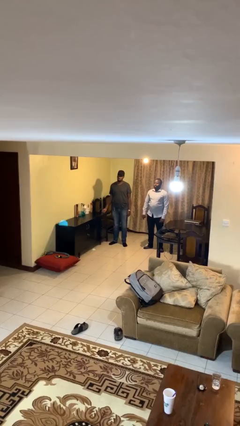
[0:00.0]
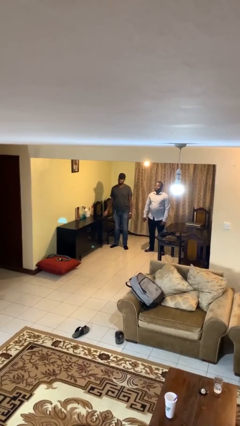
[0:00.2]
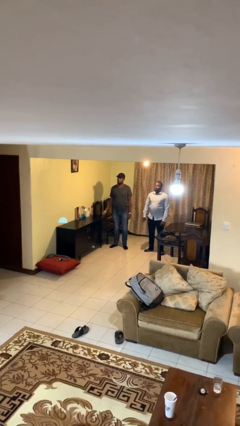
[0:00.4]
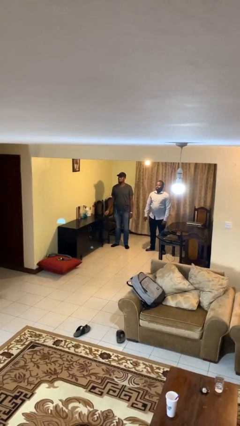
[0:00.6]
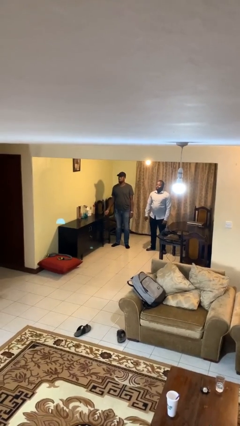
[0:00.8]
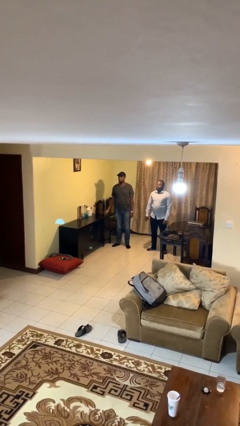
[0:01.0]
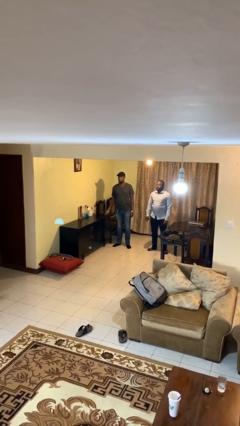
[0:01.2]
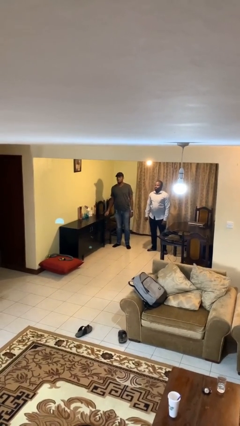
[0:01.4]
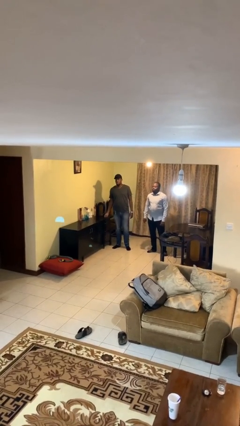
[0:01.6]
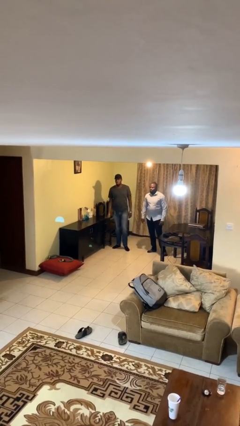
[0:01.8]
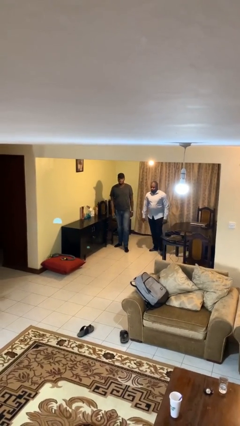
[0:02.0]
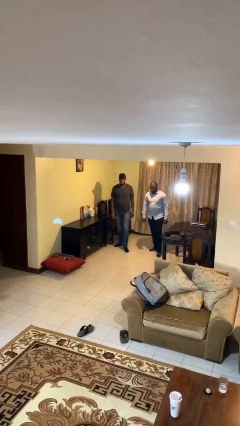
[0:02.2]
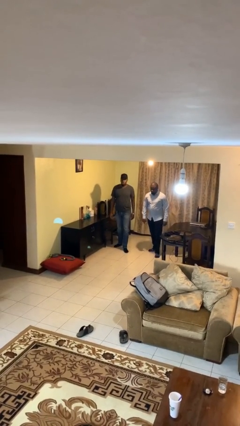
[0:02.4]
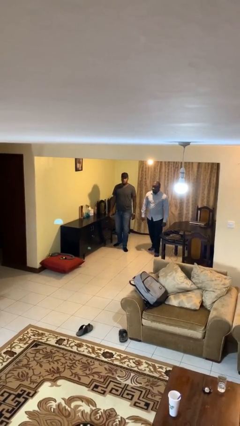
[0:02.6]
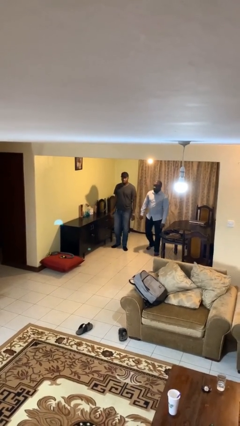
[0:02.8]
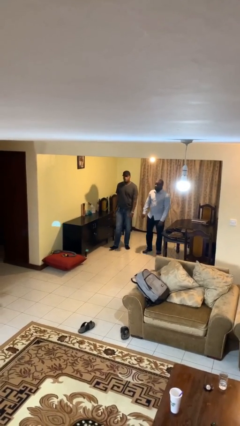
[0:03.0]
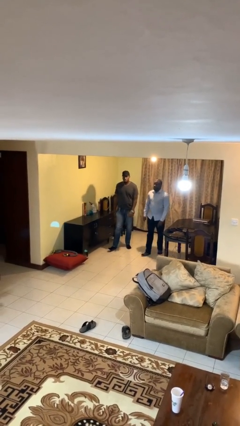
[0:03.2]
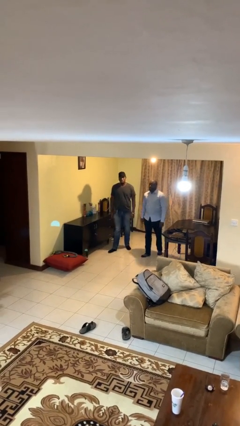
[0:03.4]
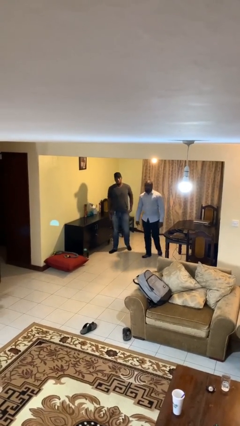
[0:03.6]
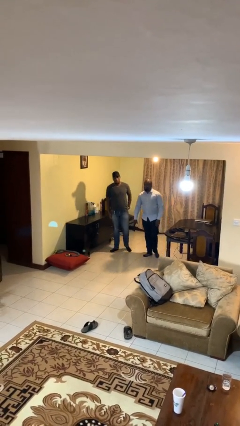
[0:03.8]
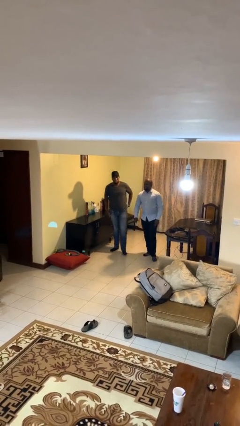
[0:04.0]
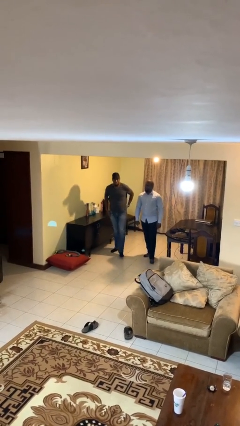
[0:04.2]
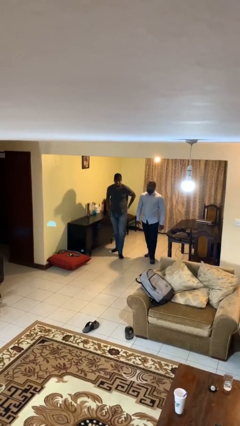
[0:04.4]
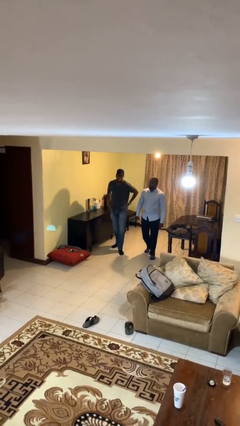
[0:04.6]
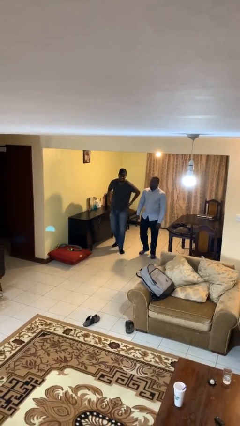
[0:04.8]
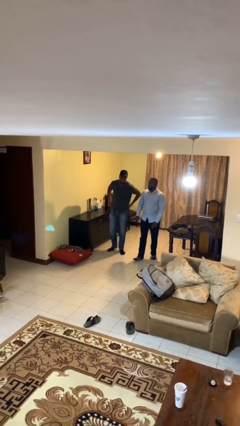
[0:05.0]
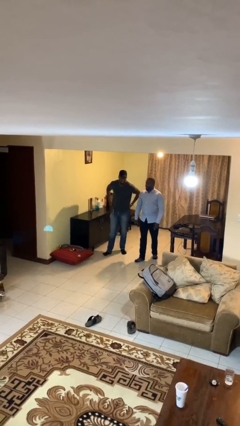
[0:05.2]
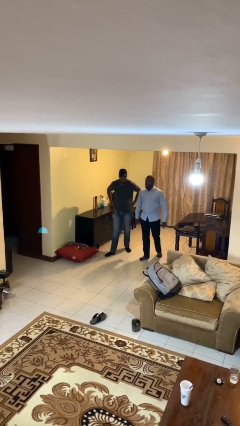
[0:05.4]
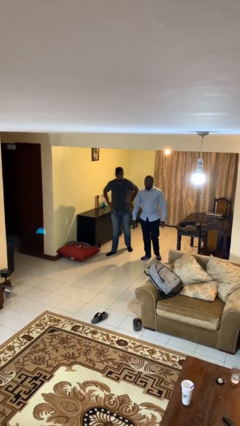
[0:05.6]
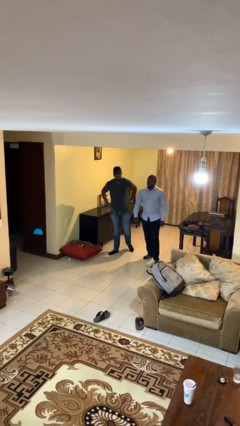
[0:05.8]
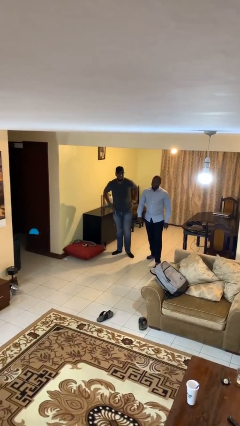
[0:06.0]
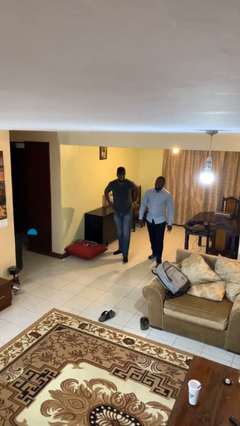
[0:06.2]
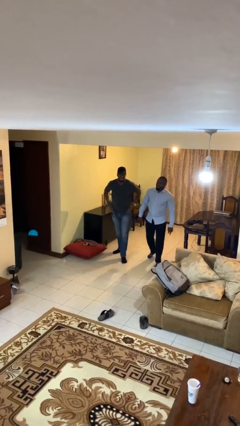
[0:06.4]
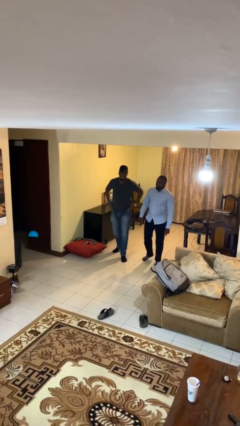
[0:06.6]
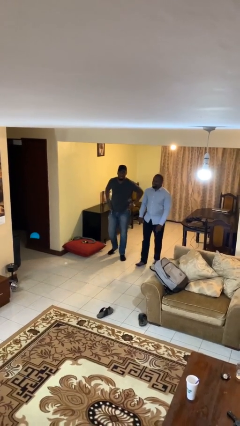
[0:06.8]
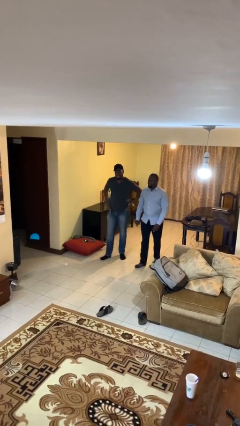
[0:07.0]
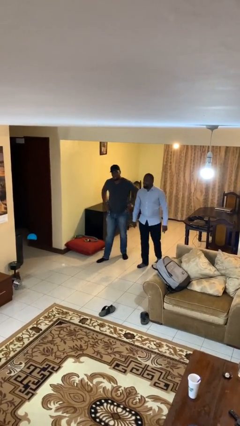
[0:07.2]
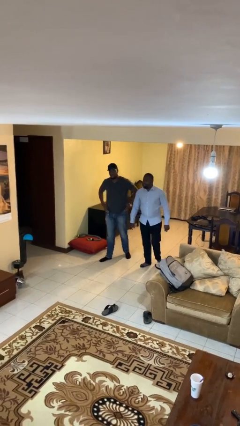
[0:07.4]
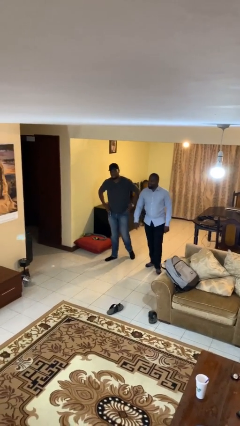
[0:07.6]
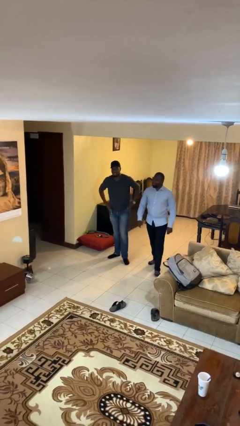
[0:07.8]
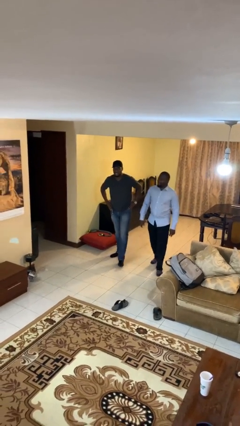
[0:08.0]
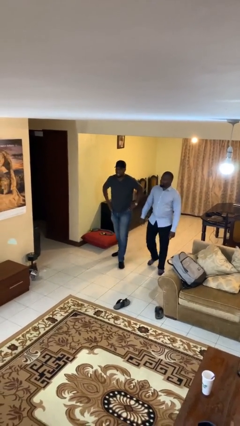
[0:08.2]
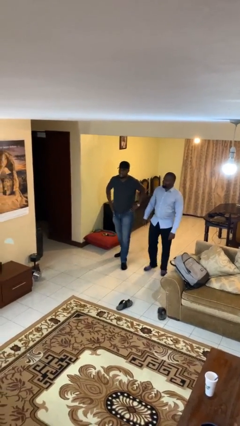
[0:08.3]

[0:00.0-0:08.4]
person talks to person

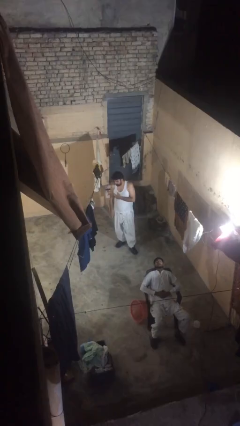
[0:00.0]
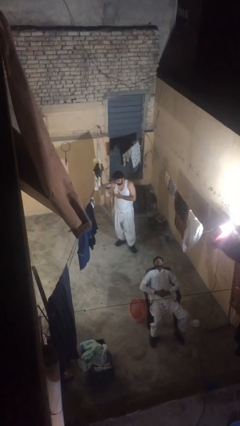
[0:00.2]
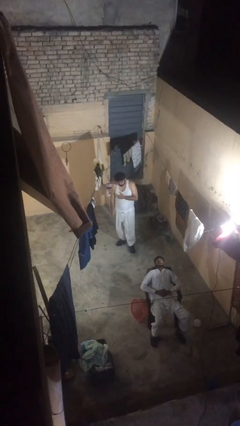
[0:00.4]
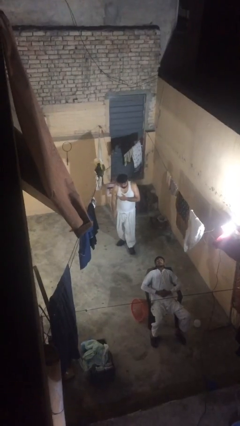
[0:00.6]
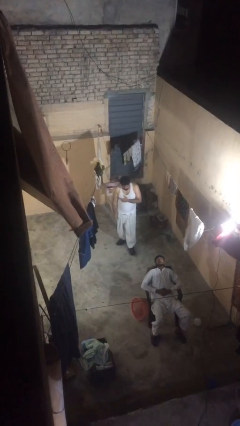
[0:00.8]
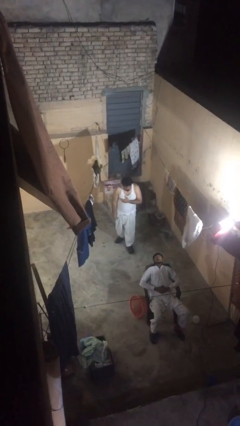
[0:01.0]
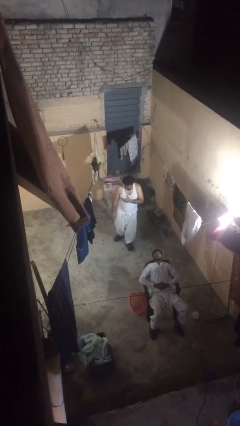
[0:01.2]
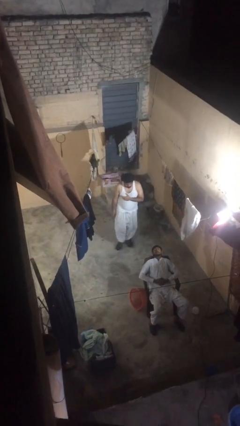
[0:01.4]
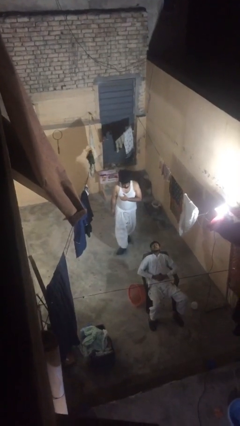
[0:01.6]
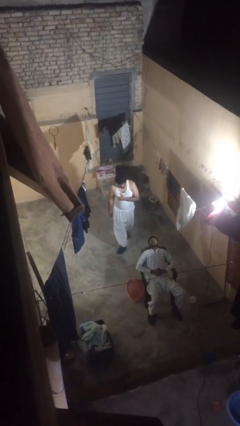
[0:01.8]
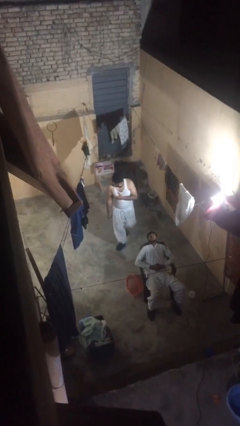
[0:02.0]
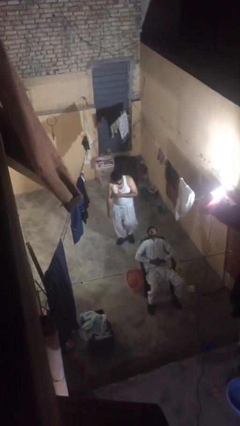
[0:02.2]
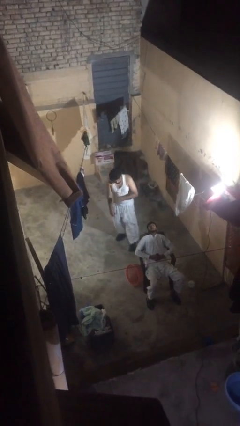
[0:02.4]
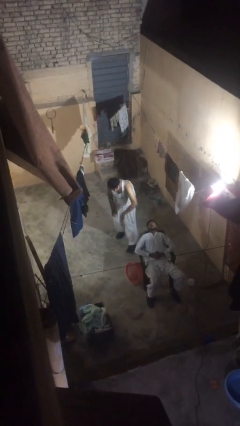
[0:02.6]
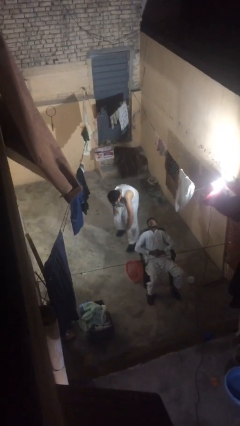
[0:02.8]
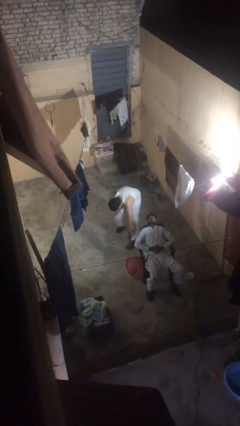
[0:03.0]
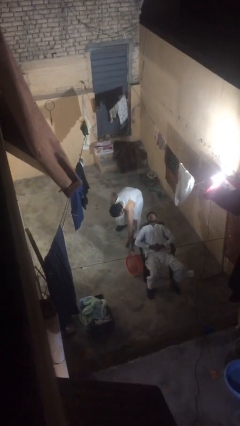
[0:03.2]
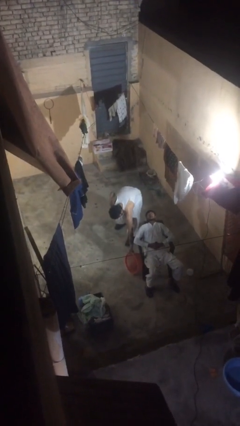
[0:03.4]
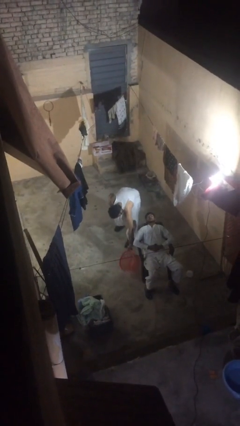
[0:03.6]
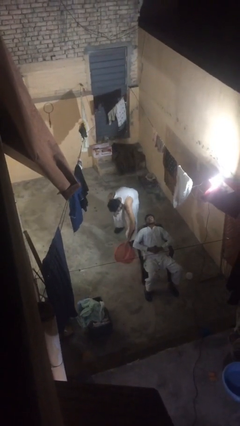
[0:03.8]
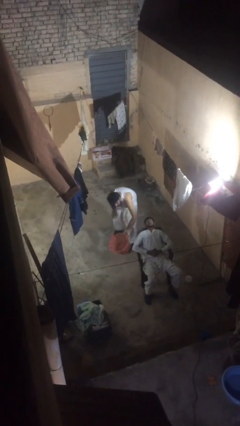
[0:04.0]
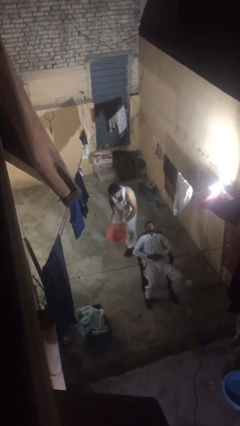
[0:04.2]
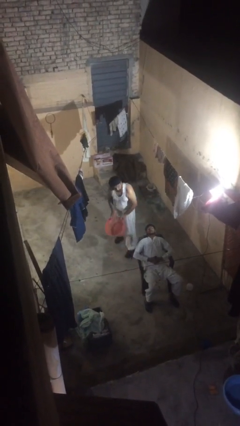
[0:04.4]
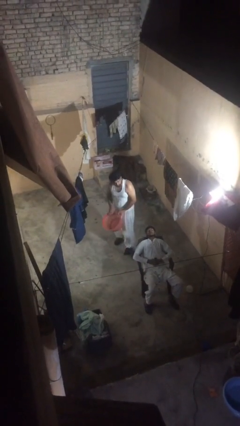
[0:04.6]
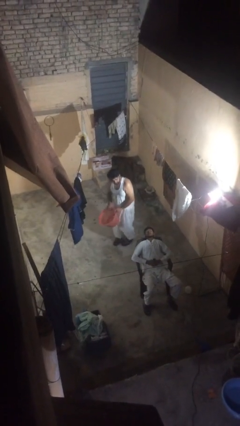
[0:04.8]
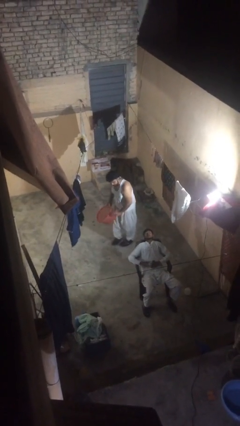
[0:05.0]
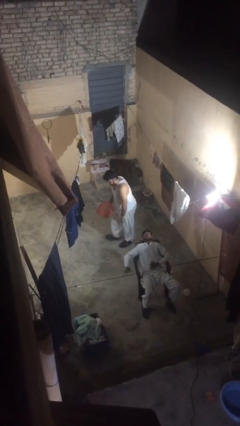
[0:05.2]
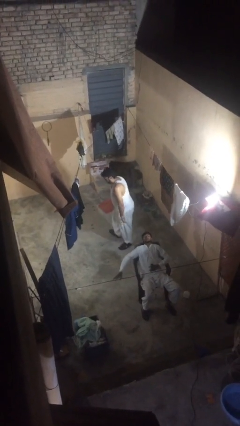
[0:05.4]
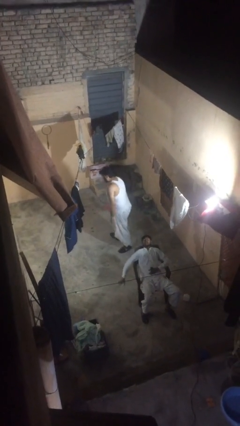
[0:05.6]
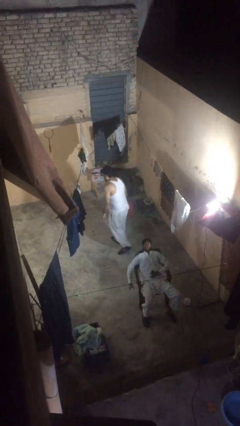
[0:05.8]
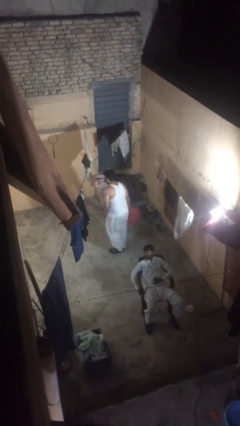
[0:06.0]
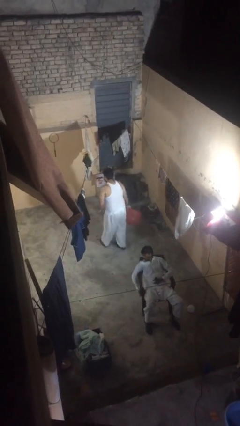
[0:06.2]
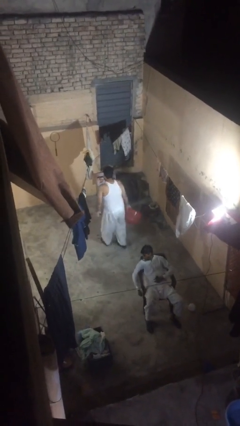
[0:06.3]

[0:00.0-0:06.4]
person steals object from person

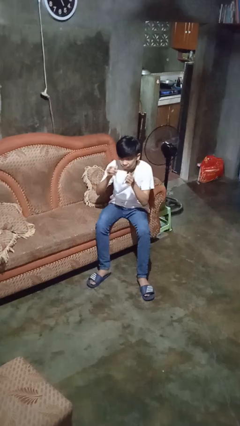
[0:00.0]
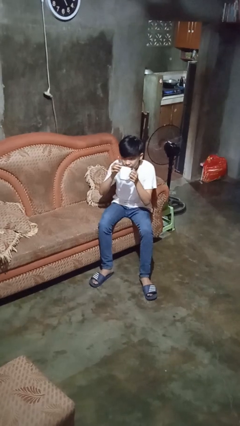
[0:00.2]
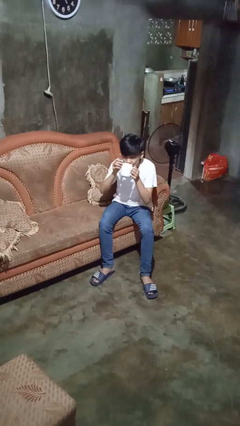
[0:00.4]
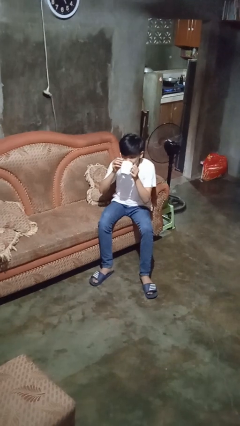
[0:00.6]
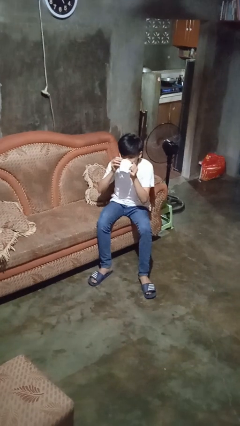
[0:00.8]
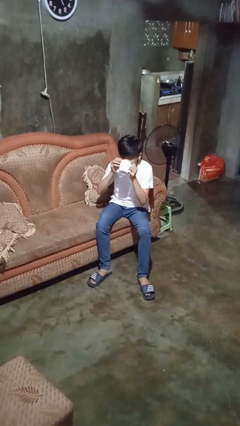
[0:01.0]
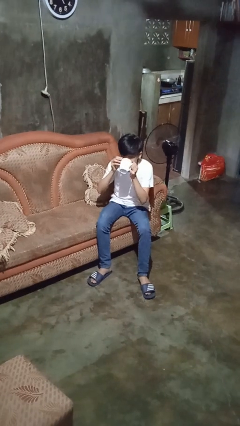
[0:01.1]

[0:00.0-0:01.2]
person drinks from mug

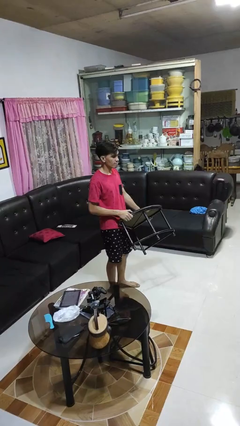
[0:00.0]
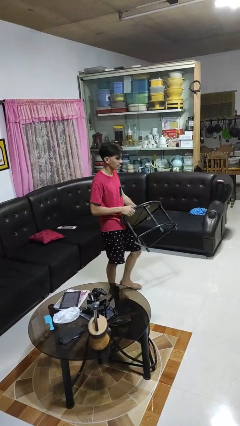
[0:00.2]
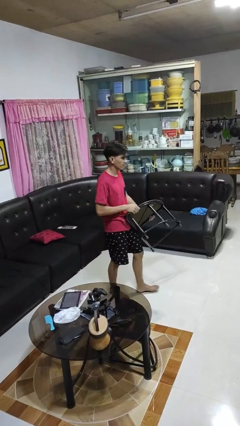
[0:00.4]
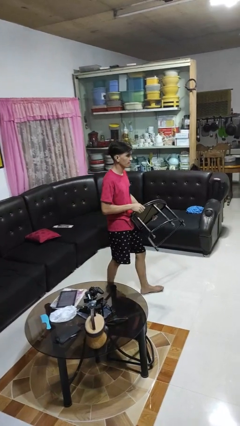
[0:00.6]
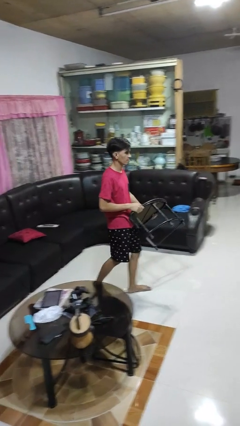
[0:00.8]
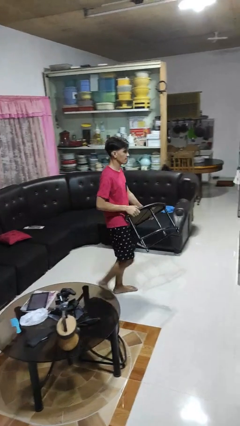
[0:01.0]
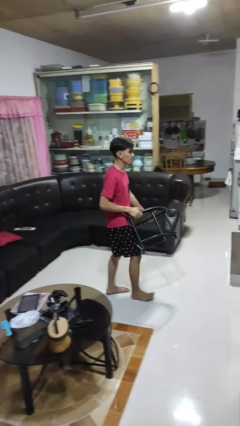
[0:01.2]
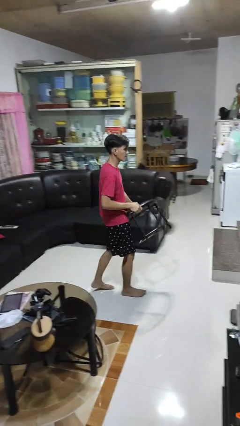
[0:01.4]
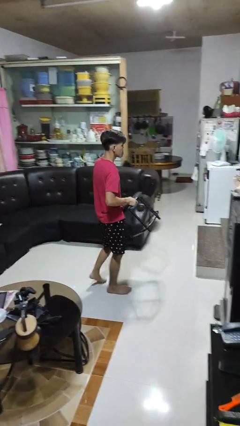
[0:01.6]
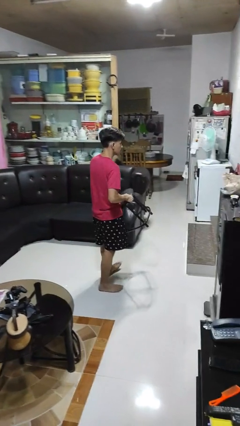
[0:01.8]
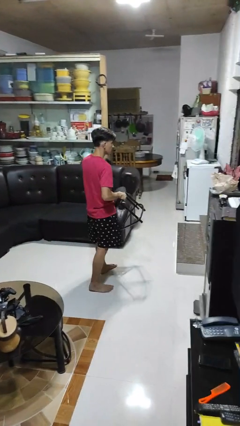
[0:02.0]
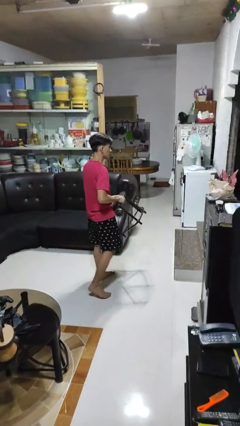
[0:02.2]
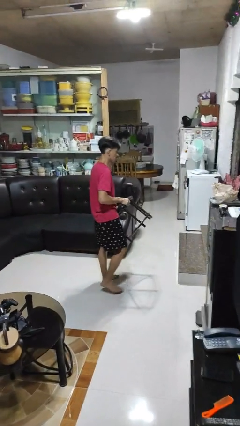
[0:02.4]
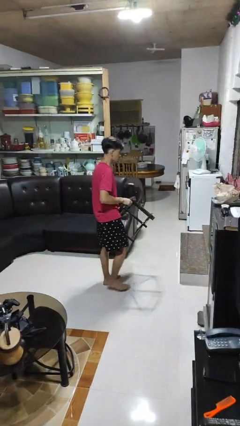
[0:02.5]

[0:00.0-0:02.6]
person carries furniture
